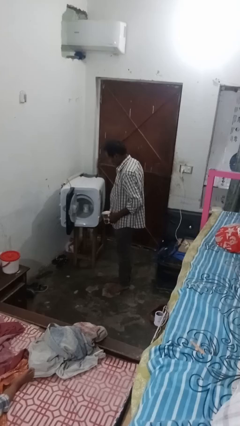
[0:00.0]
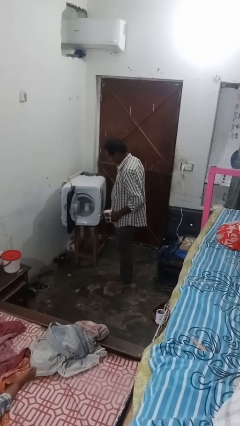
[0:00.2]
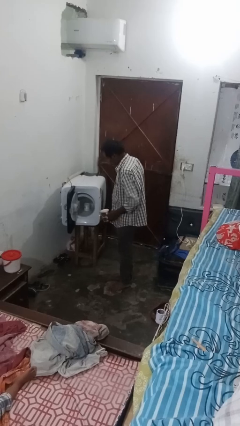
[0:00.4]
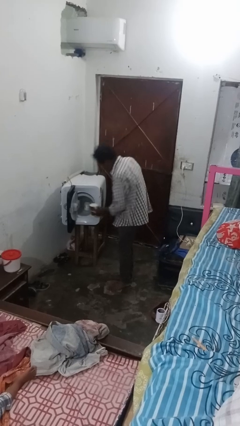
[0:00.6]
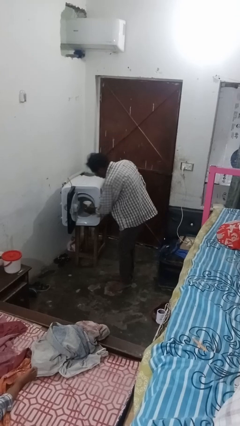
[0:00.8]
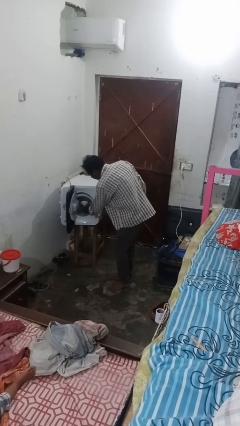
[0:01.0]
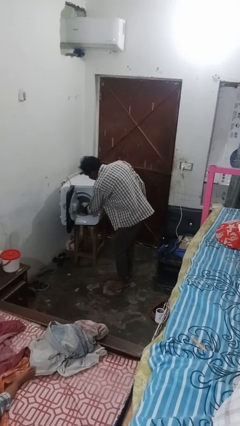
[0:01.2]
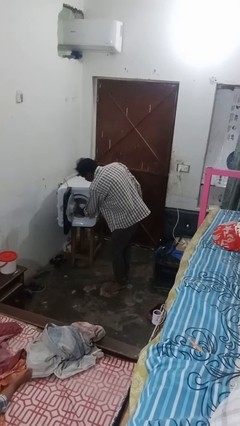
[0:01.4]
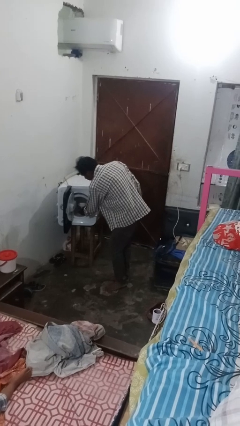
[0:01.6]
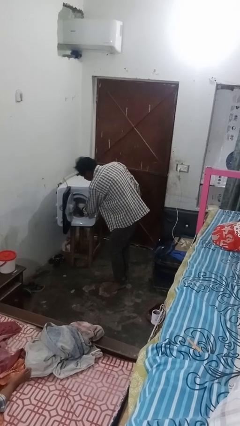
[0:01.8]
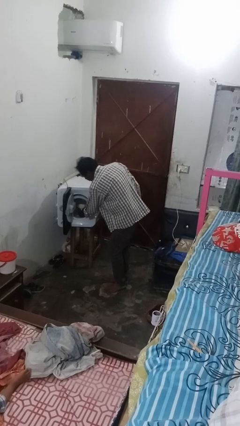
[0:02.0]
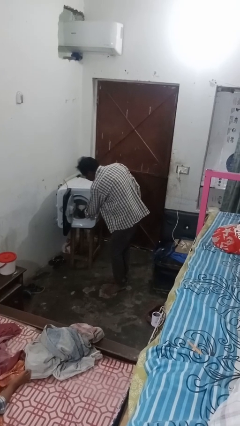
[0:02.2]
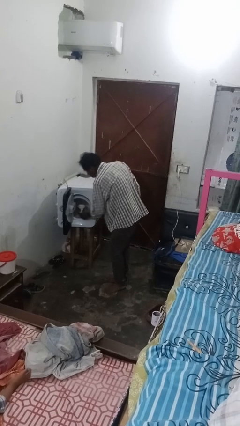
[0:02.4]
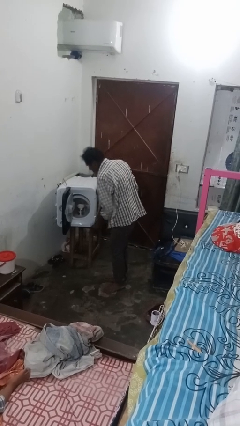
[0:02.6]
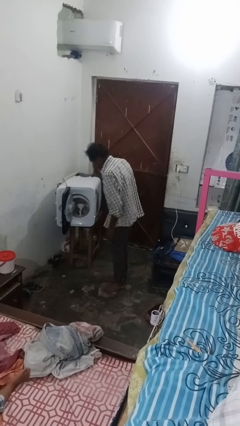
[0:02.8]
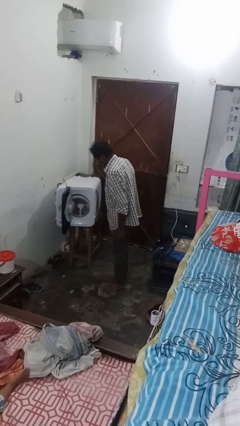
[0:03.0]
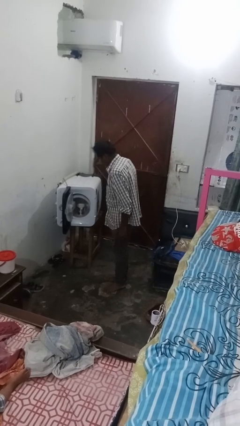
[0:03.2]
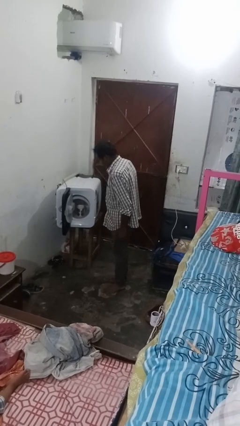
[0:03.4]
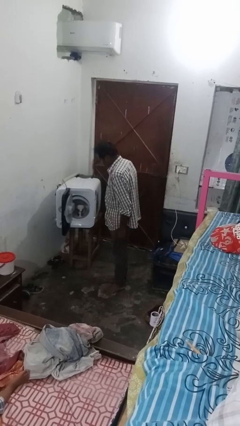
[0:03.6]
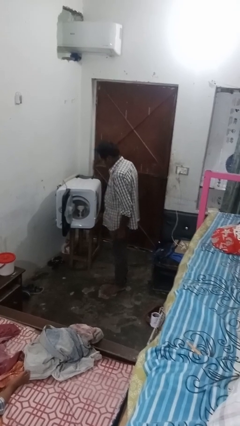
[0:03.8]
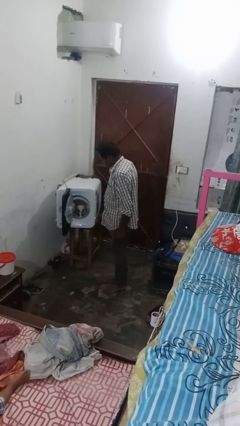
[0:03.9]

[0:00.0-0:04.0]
person loads dishwasher

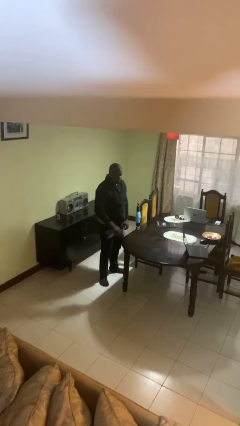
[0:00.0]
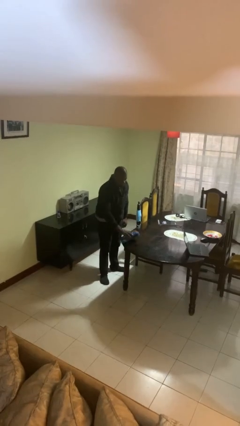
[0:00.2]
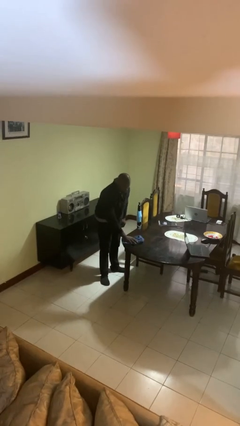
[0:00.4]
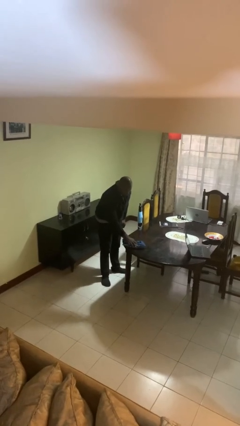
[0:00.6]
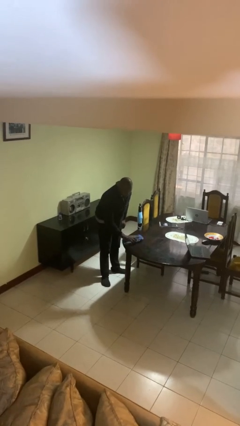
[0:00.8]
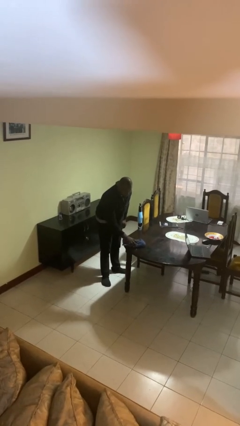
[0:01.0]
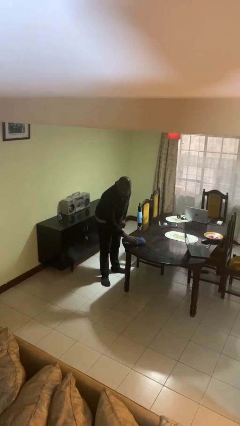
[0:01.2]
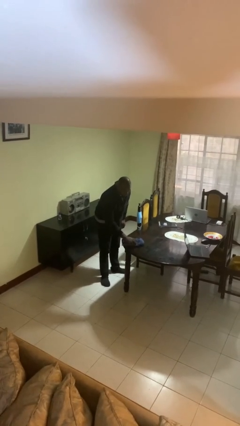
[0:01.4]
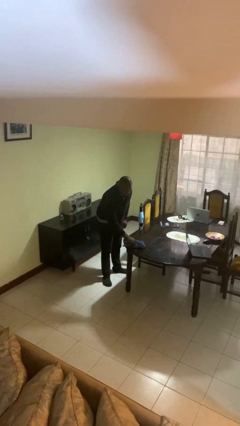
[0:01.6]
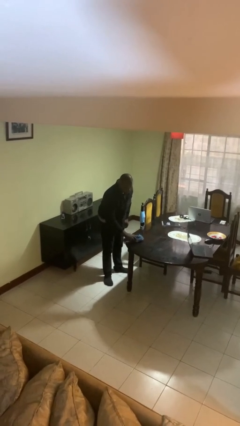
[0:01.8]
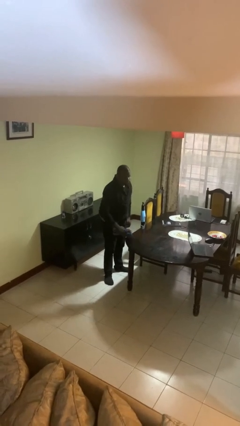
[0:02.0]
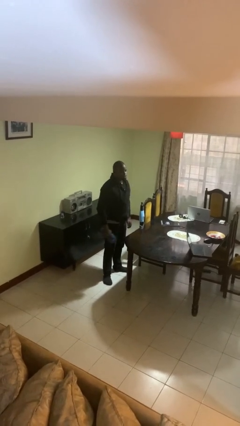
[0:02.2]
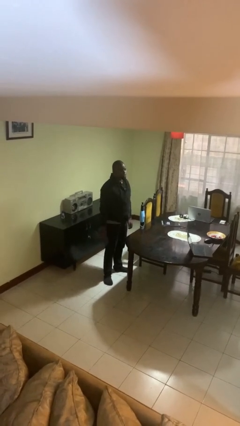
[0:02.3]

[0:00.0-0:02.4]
person cleans table with rag

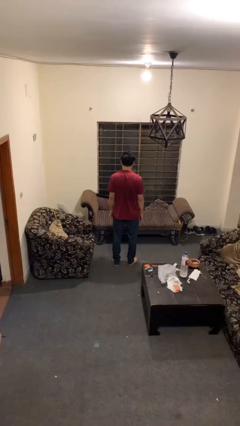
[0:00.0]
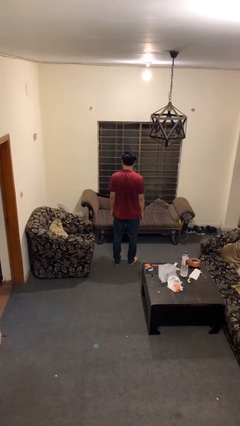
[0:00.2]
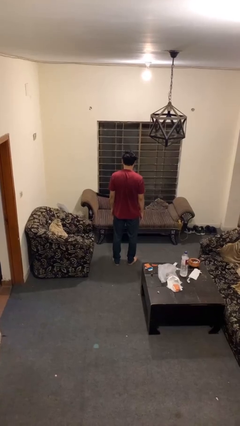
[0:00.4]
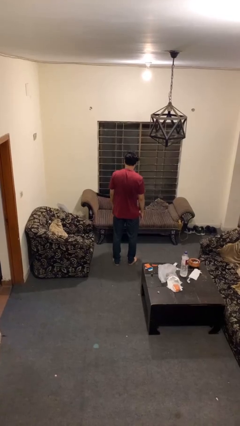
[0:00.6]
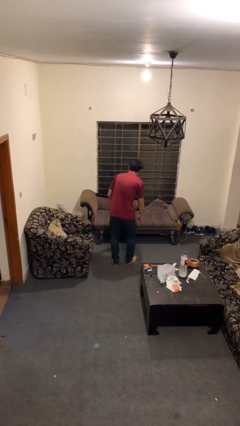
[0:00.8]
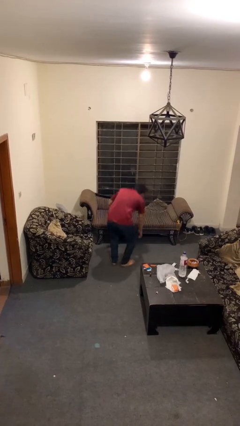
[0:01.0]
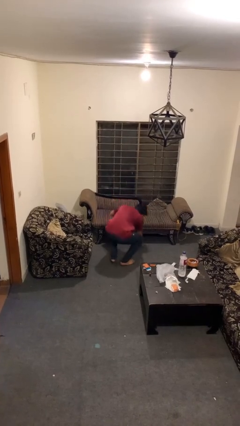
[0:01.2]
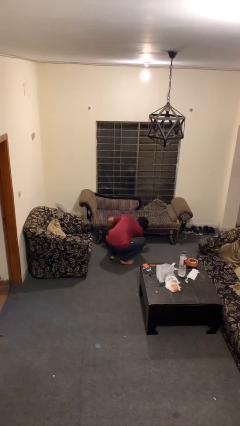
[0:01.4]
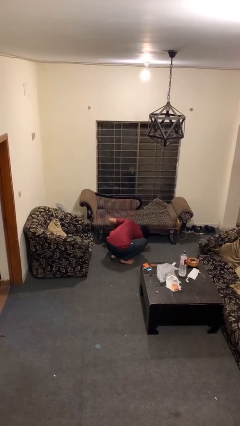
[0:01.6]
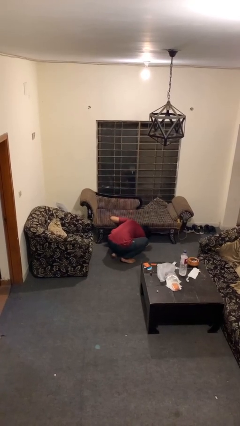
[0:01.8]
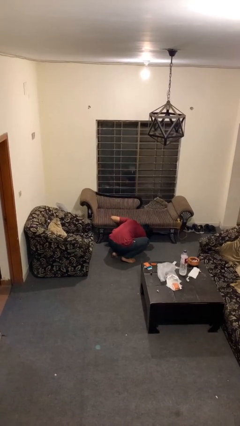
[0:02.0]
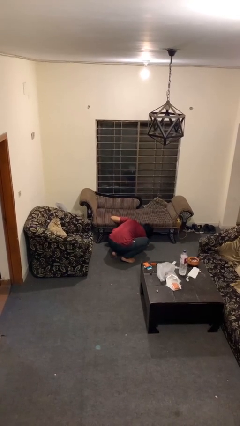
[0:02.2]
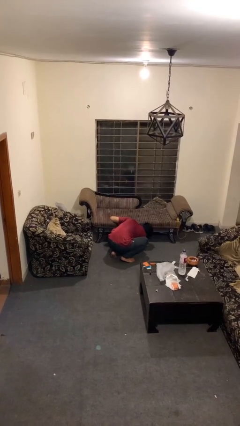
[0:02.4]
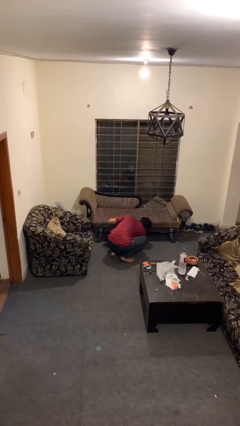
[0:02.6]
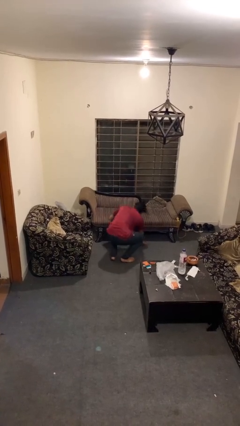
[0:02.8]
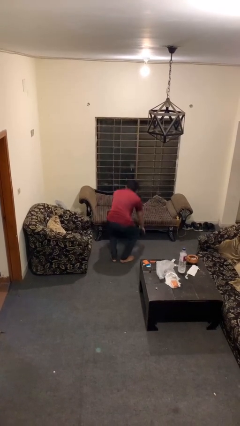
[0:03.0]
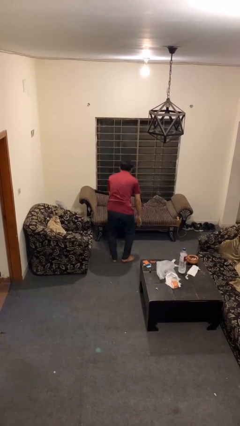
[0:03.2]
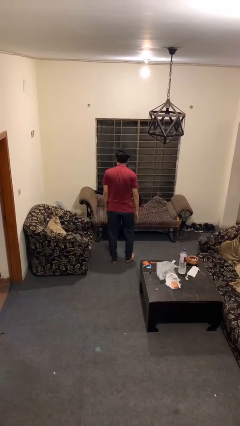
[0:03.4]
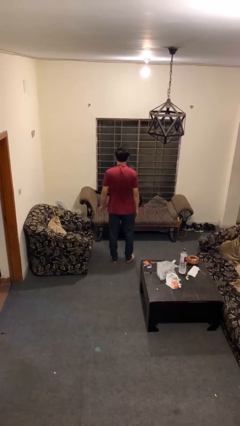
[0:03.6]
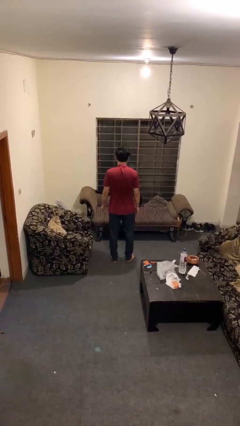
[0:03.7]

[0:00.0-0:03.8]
person searches under couch

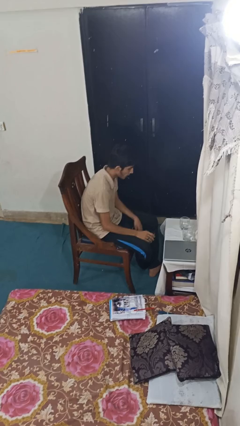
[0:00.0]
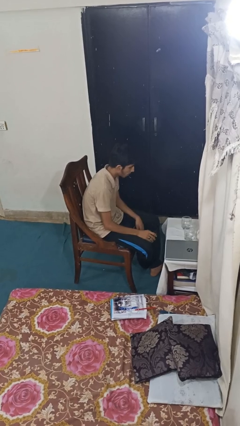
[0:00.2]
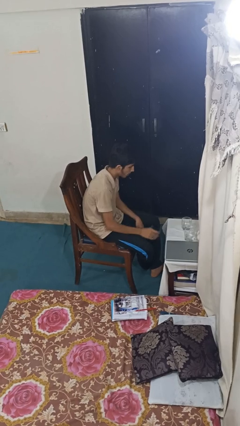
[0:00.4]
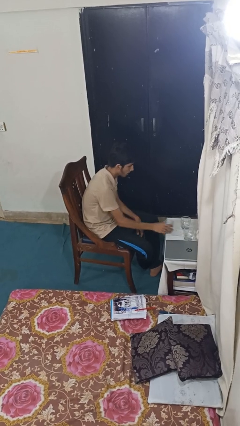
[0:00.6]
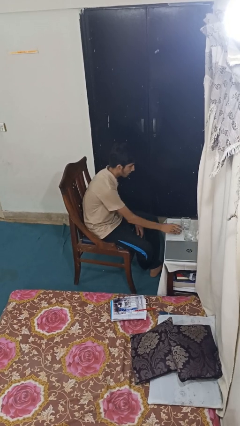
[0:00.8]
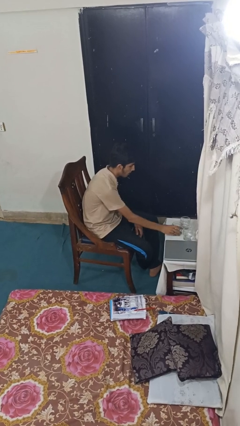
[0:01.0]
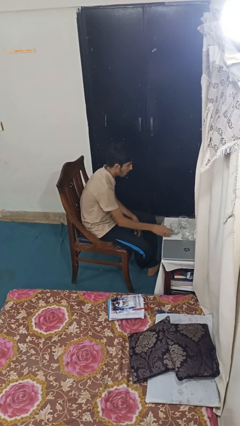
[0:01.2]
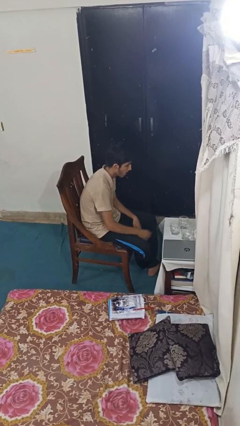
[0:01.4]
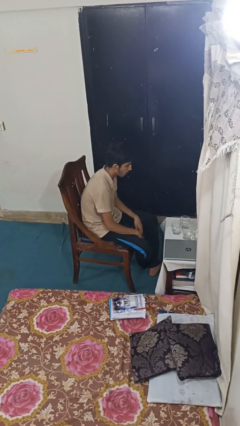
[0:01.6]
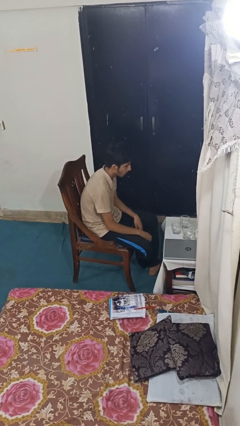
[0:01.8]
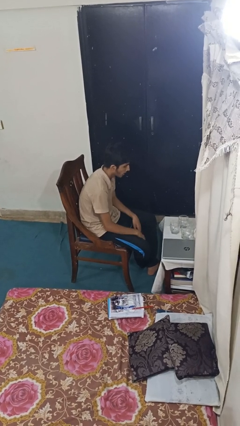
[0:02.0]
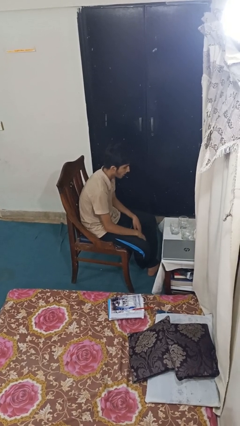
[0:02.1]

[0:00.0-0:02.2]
person puts down object on table

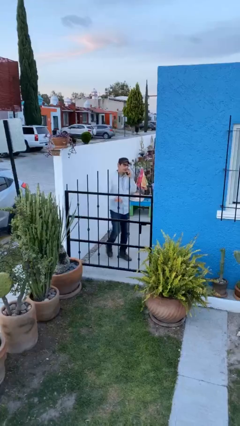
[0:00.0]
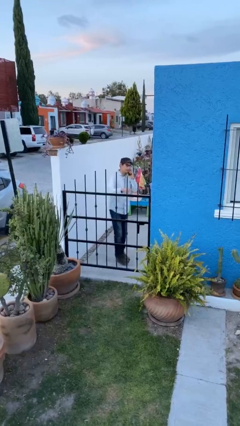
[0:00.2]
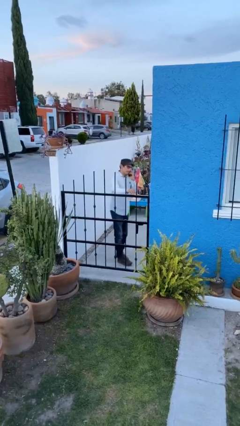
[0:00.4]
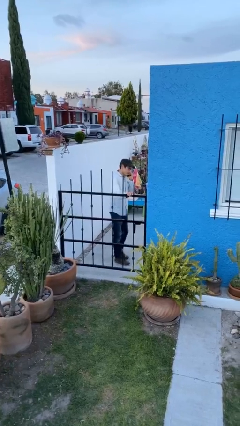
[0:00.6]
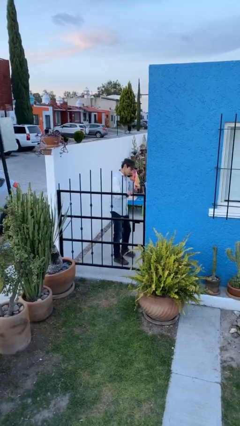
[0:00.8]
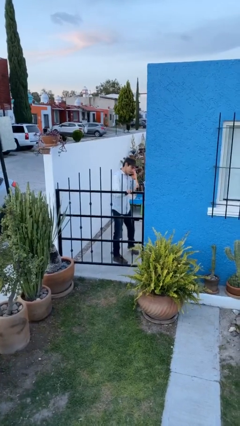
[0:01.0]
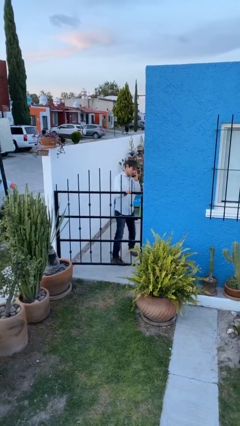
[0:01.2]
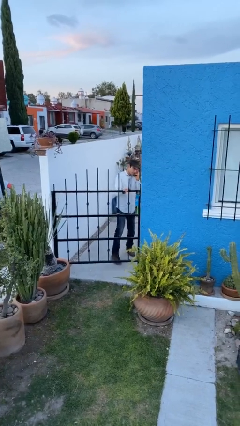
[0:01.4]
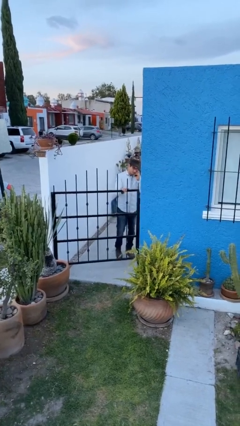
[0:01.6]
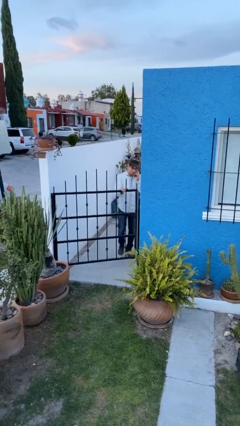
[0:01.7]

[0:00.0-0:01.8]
person opens facility door

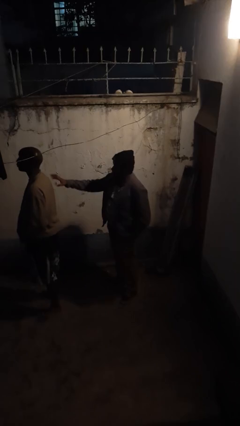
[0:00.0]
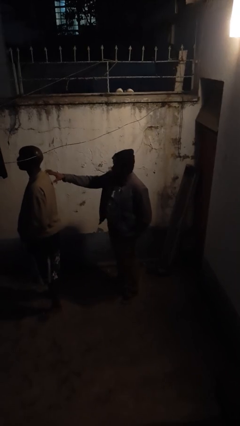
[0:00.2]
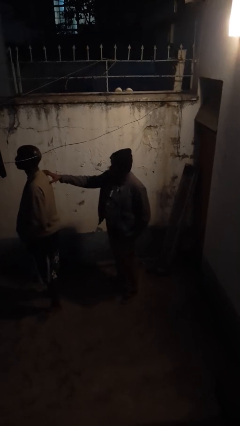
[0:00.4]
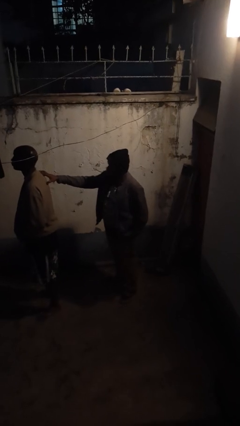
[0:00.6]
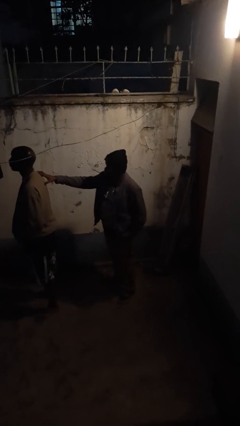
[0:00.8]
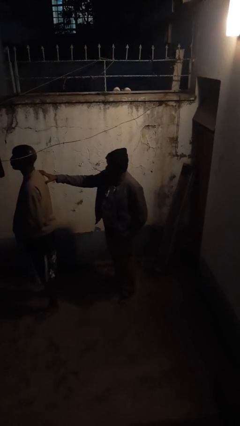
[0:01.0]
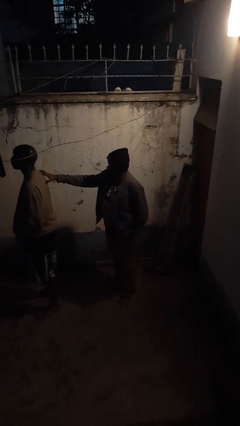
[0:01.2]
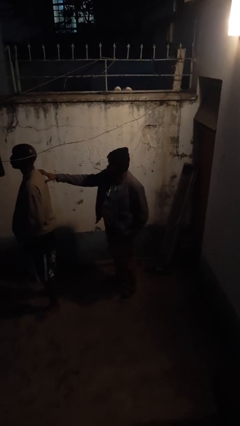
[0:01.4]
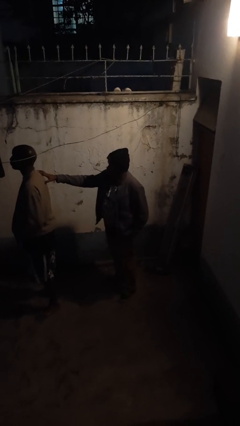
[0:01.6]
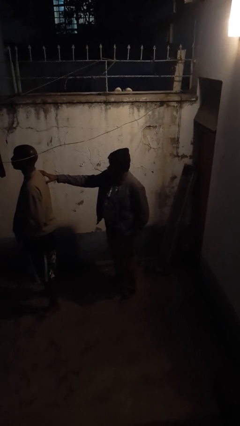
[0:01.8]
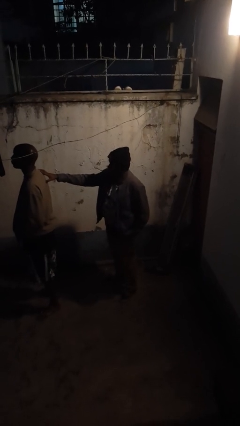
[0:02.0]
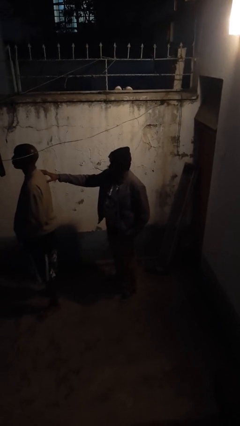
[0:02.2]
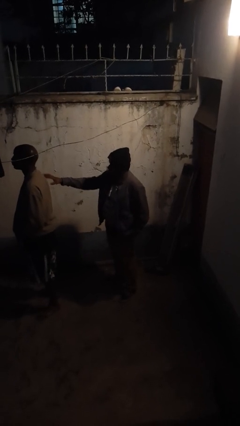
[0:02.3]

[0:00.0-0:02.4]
person touches back of person

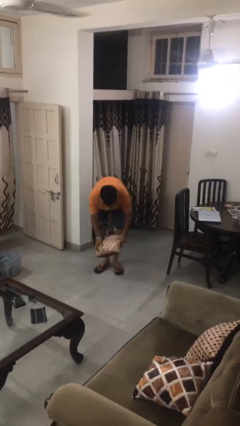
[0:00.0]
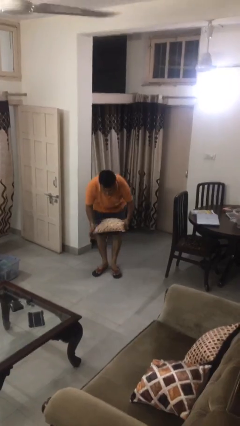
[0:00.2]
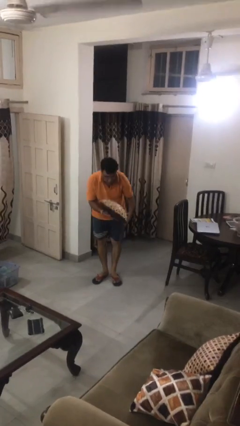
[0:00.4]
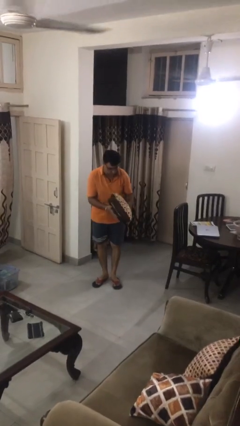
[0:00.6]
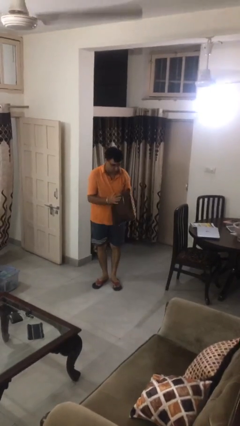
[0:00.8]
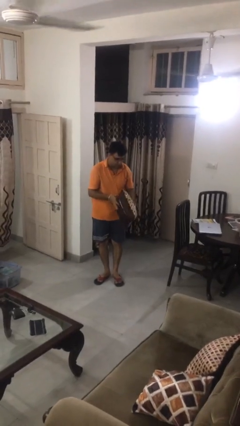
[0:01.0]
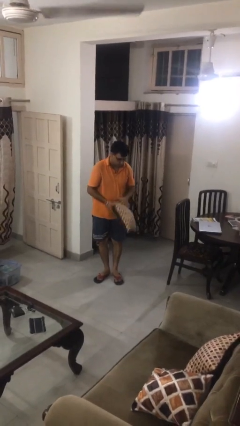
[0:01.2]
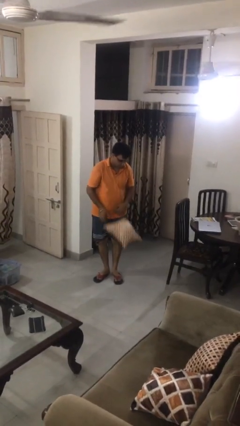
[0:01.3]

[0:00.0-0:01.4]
person picks up object from floor
